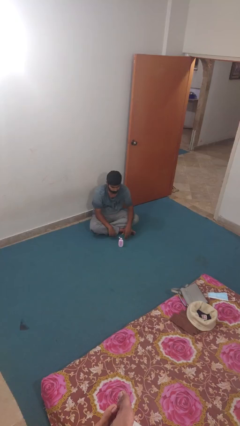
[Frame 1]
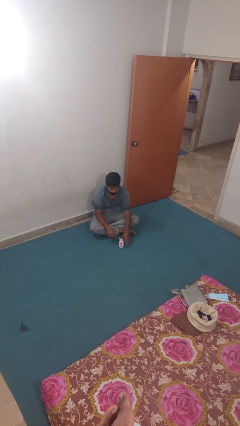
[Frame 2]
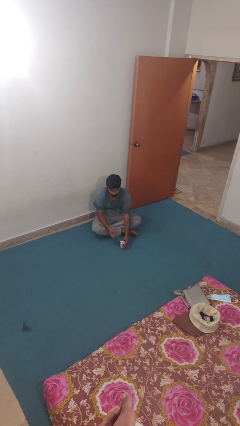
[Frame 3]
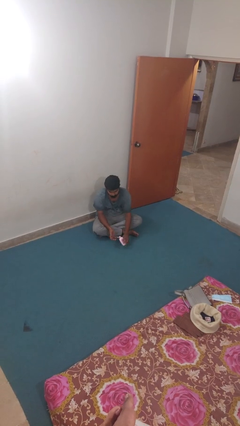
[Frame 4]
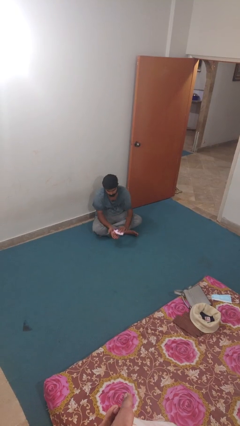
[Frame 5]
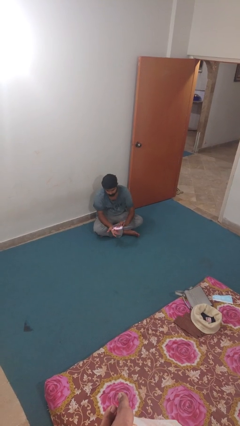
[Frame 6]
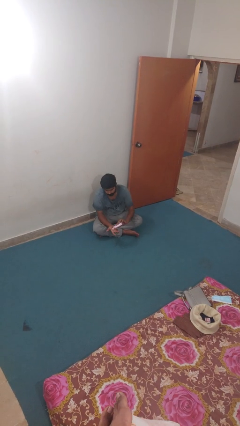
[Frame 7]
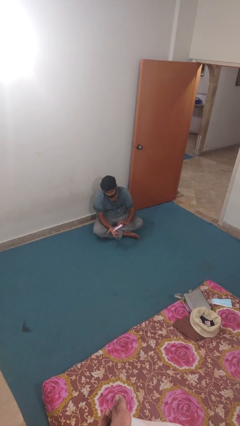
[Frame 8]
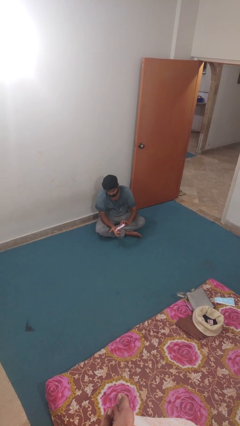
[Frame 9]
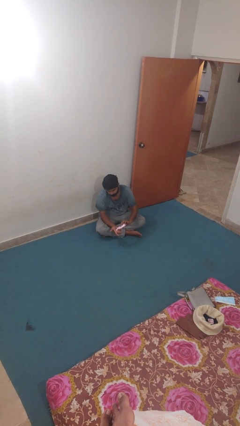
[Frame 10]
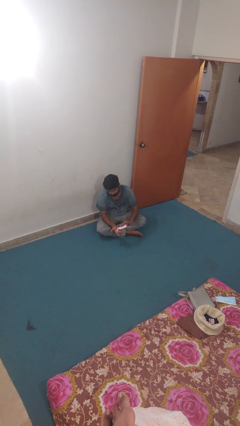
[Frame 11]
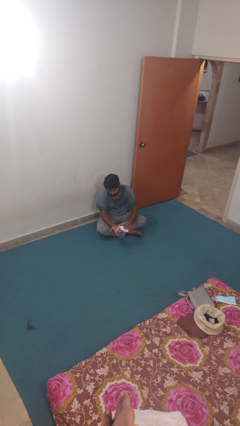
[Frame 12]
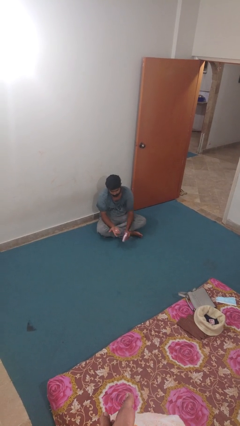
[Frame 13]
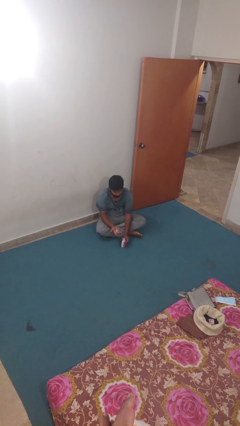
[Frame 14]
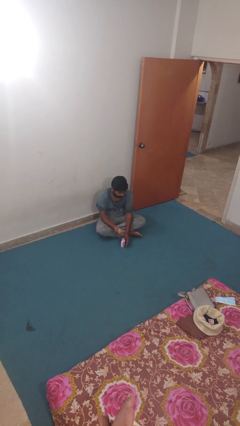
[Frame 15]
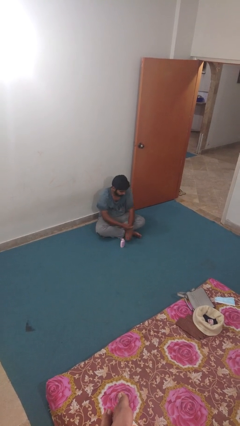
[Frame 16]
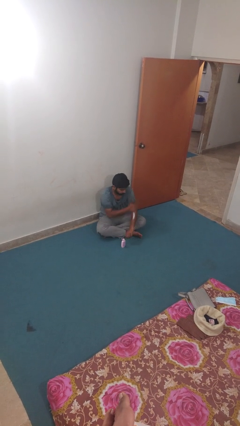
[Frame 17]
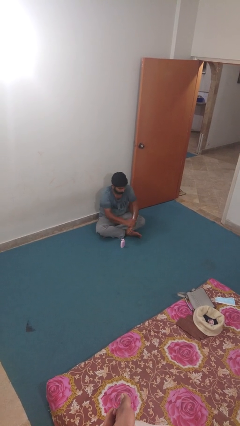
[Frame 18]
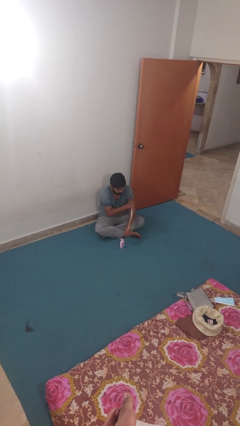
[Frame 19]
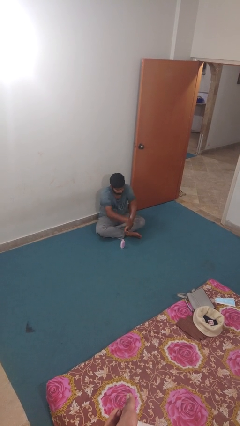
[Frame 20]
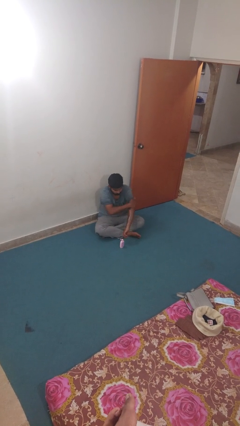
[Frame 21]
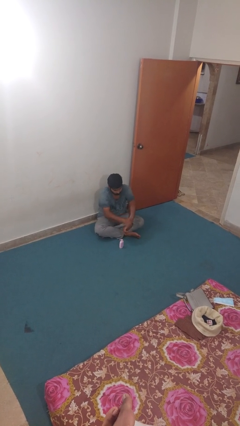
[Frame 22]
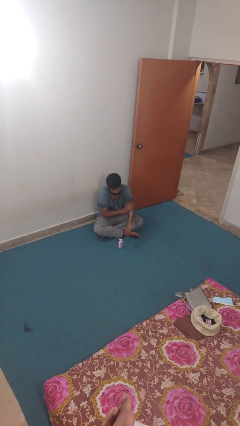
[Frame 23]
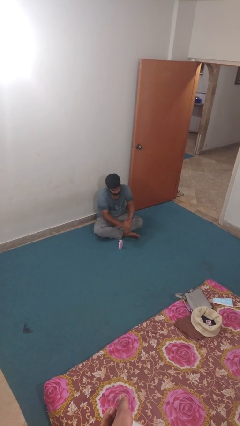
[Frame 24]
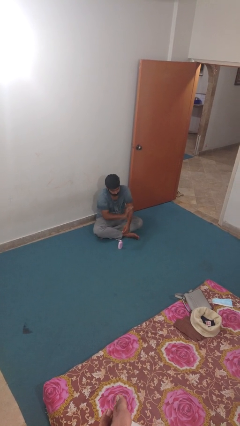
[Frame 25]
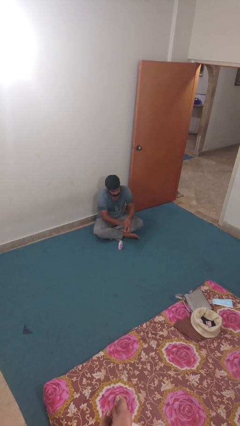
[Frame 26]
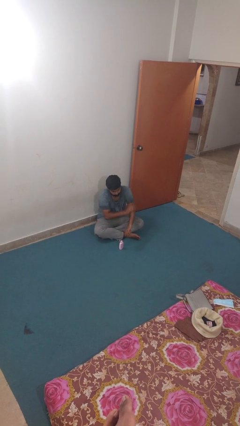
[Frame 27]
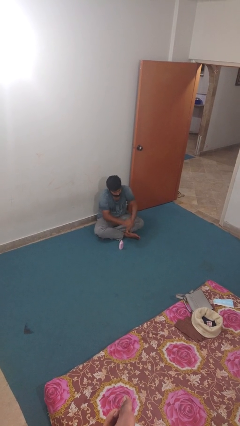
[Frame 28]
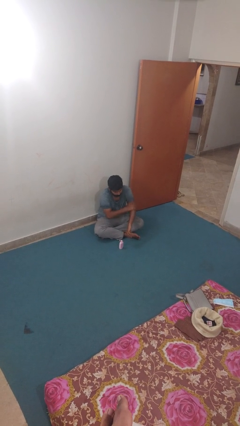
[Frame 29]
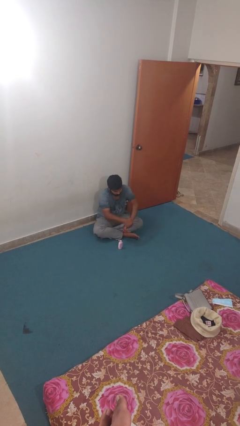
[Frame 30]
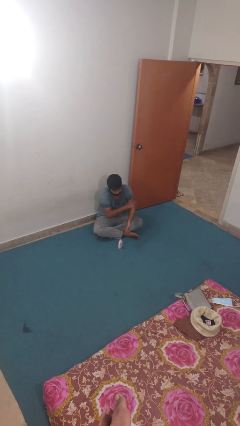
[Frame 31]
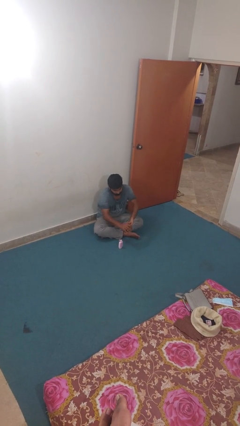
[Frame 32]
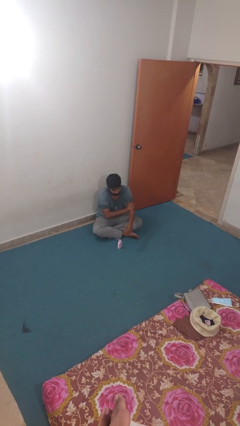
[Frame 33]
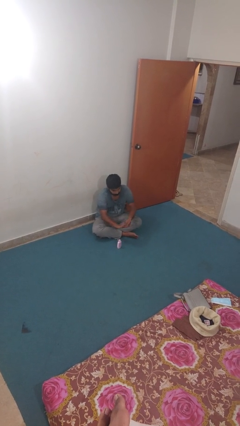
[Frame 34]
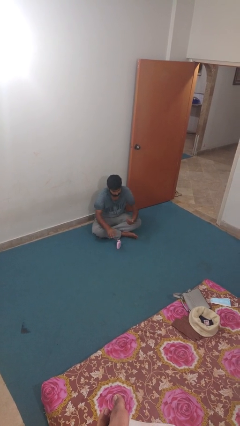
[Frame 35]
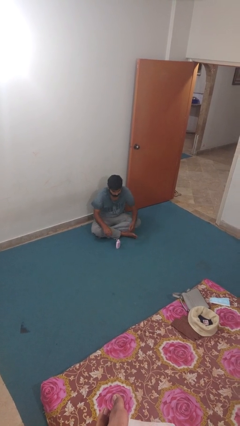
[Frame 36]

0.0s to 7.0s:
person applies sunscreen

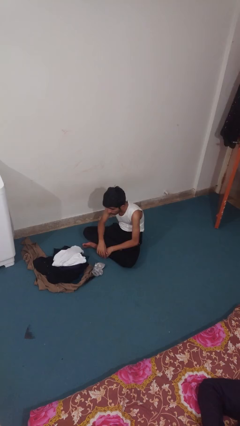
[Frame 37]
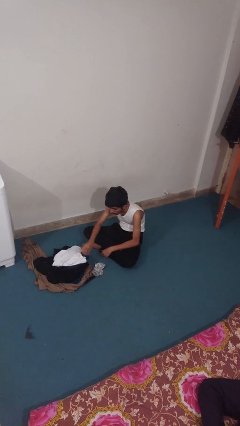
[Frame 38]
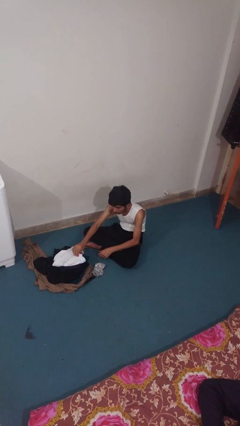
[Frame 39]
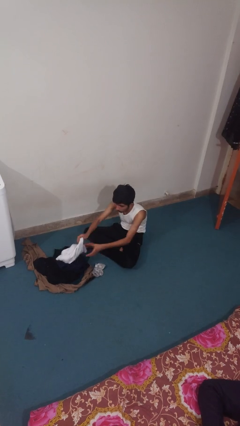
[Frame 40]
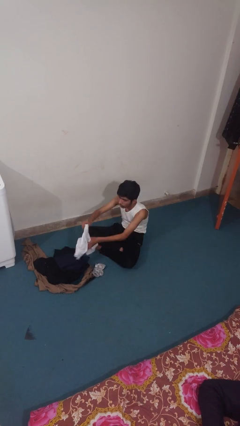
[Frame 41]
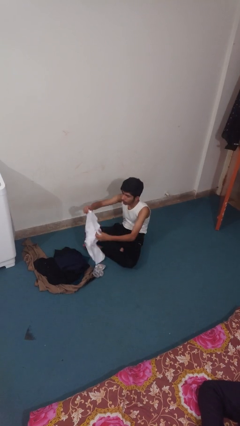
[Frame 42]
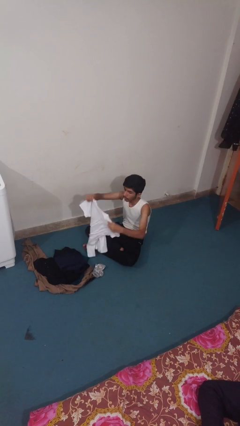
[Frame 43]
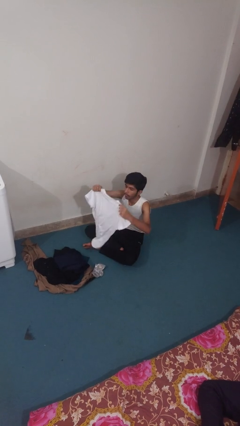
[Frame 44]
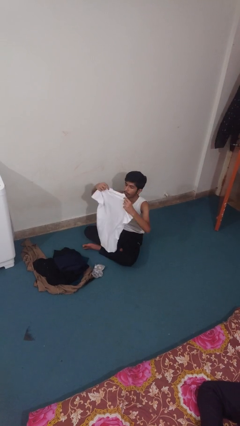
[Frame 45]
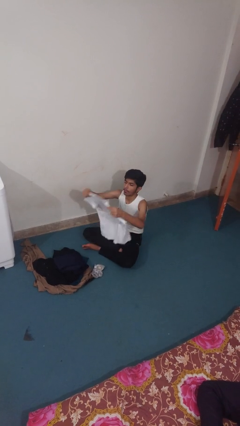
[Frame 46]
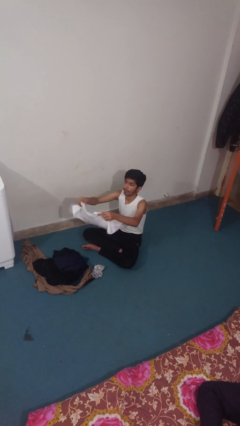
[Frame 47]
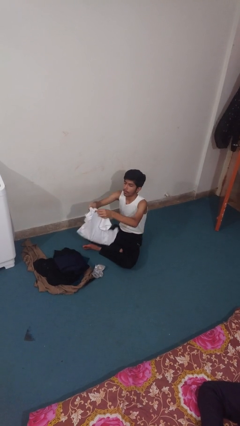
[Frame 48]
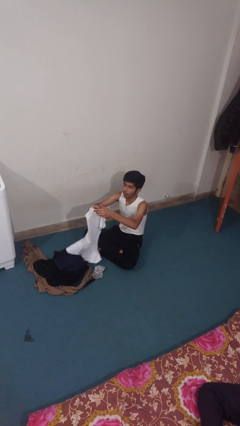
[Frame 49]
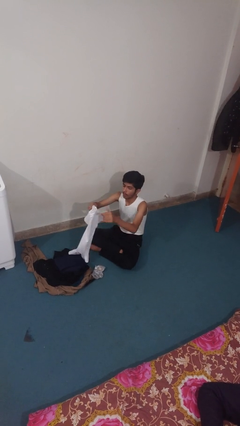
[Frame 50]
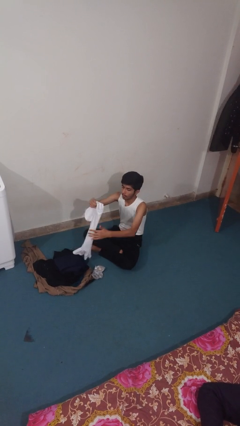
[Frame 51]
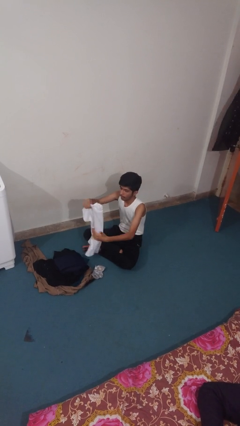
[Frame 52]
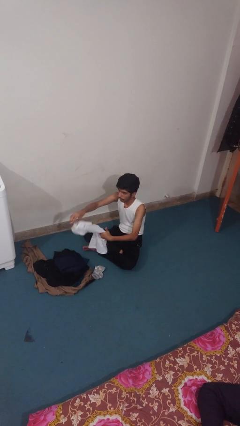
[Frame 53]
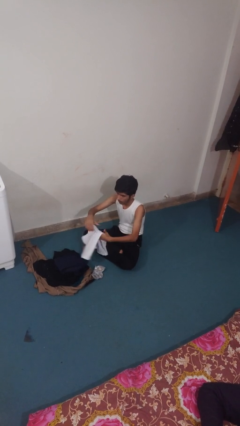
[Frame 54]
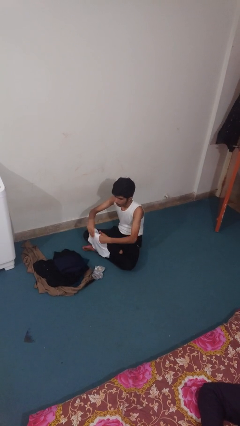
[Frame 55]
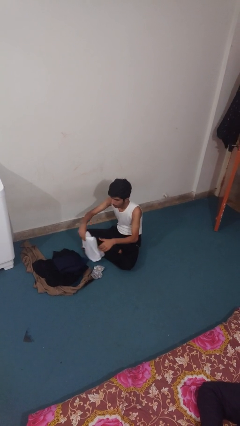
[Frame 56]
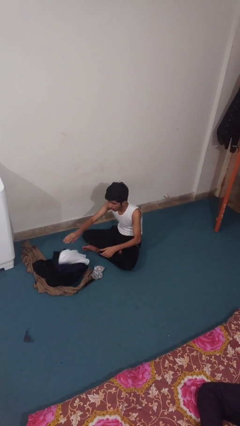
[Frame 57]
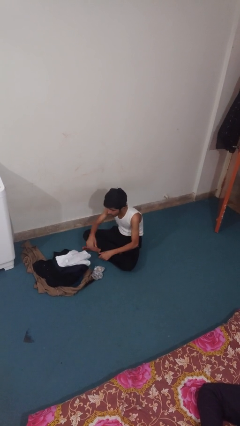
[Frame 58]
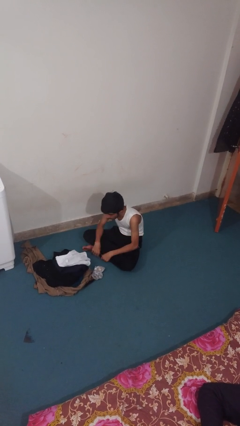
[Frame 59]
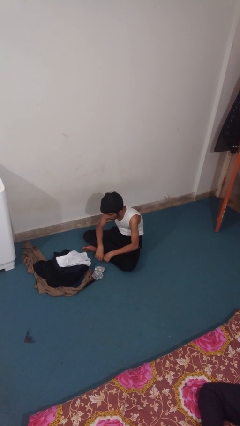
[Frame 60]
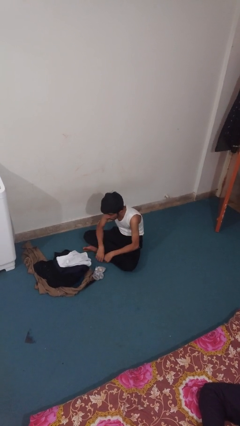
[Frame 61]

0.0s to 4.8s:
person folds shirt

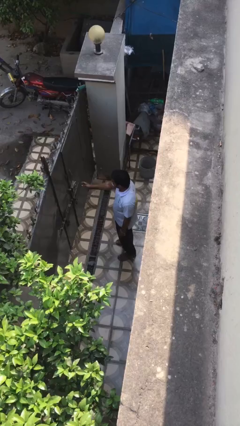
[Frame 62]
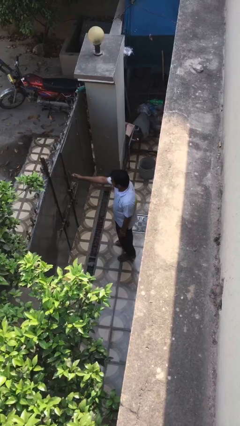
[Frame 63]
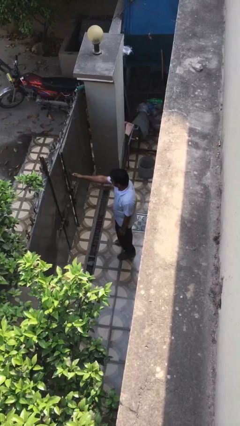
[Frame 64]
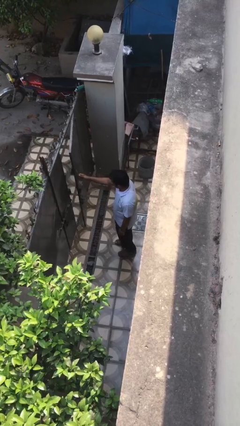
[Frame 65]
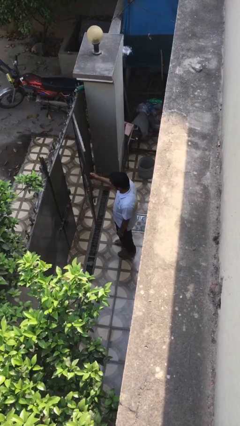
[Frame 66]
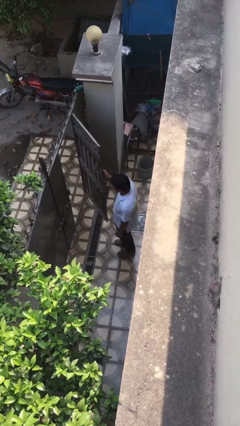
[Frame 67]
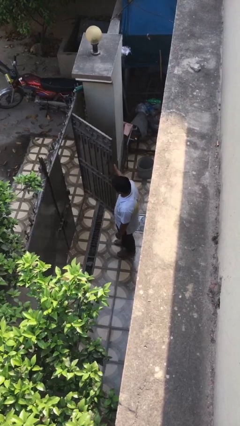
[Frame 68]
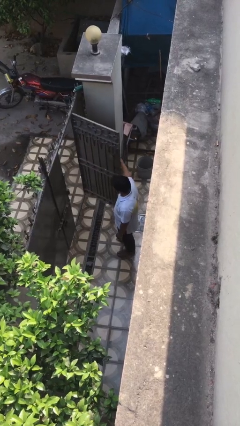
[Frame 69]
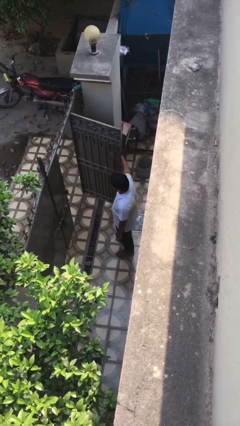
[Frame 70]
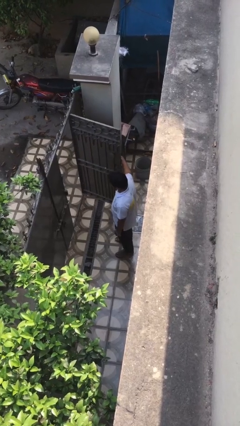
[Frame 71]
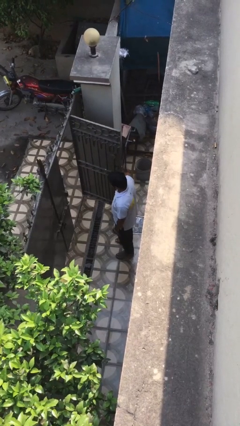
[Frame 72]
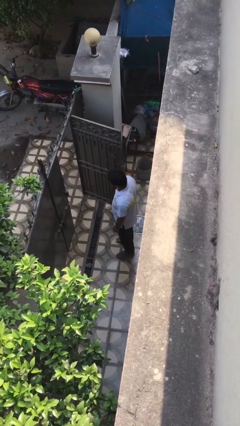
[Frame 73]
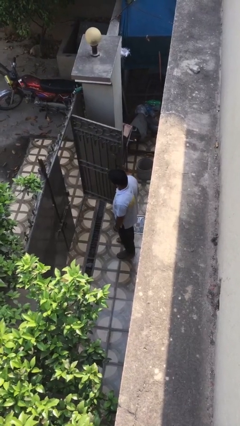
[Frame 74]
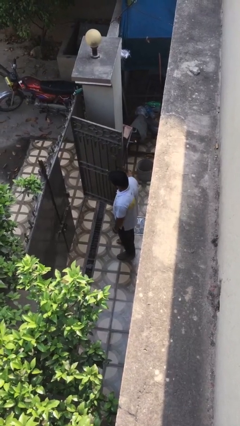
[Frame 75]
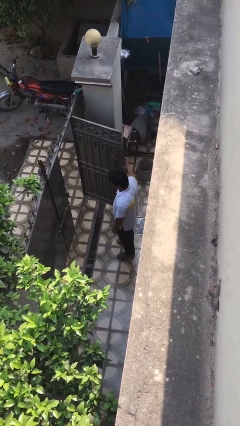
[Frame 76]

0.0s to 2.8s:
person opens facility door

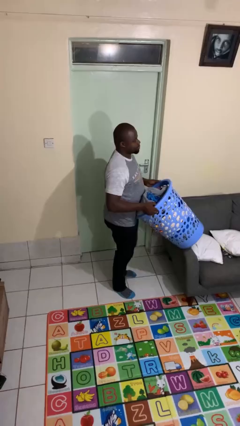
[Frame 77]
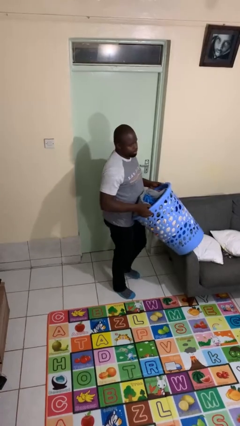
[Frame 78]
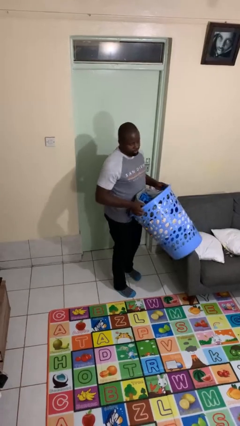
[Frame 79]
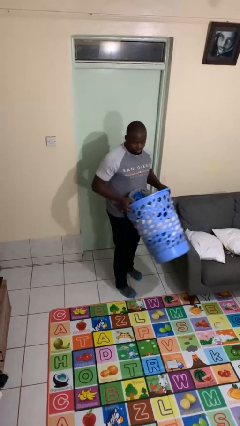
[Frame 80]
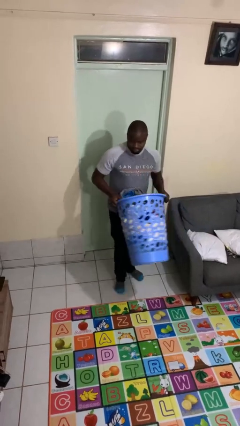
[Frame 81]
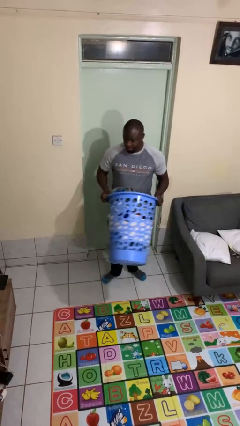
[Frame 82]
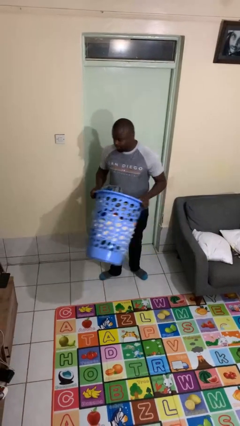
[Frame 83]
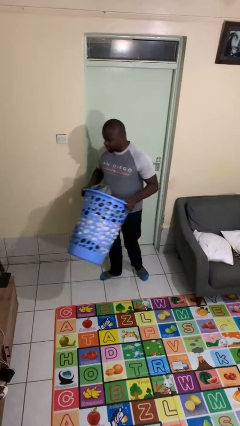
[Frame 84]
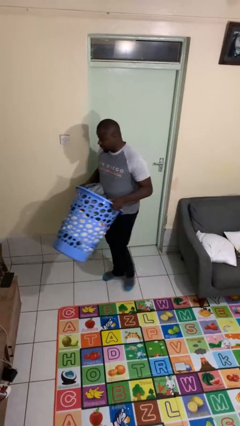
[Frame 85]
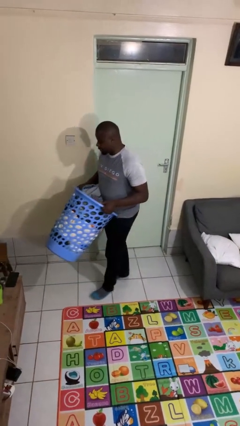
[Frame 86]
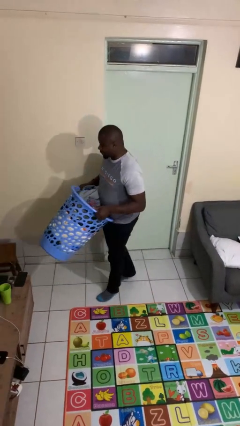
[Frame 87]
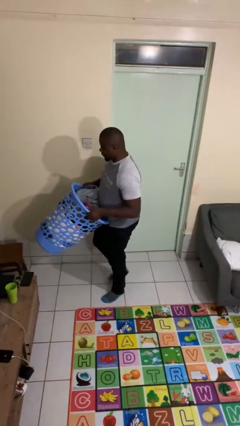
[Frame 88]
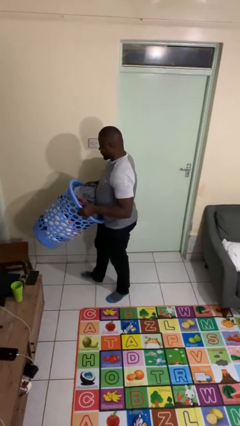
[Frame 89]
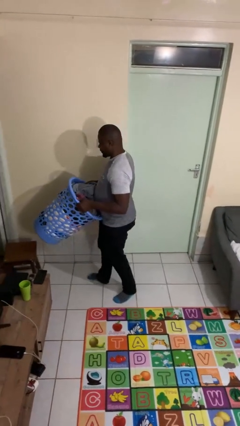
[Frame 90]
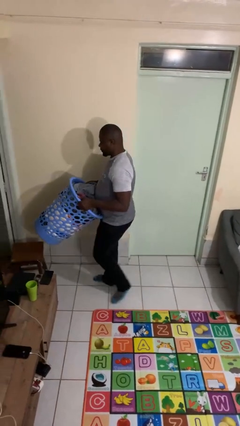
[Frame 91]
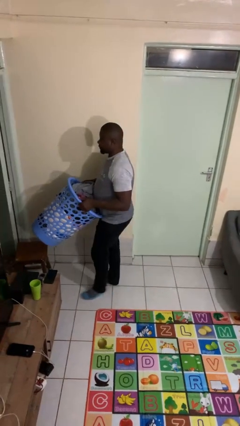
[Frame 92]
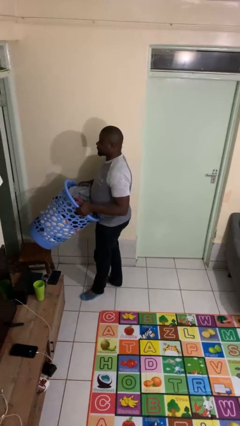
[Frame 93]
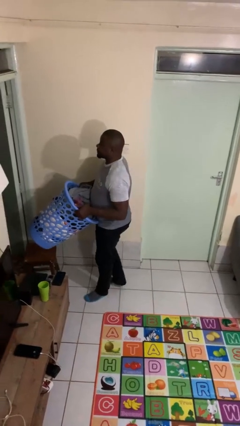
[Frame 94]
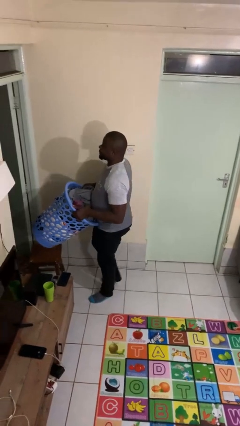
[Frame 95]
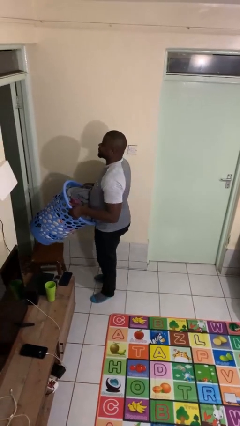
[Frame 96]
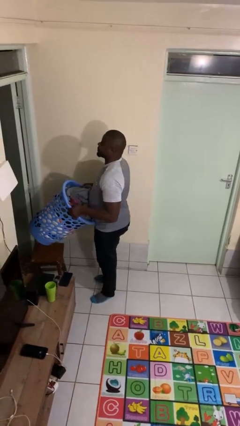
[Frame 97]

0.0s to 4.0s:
person carries laundry basket
